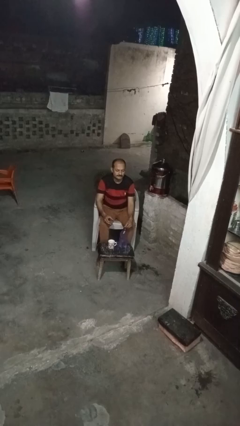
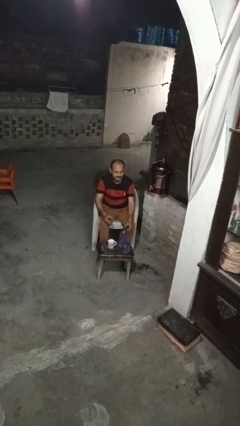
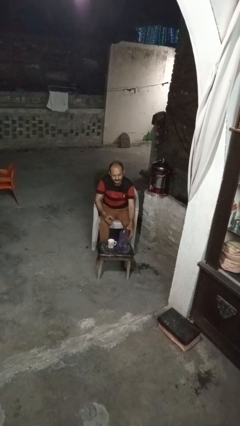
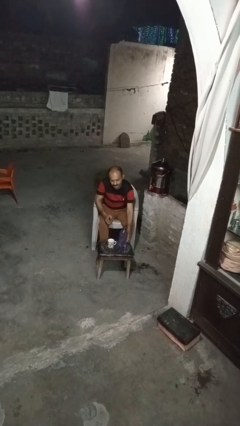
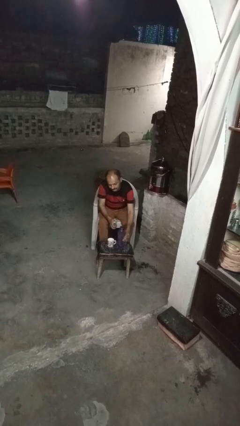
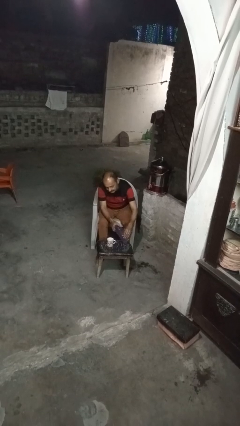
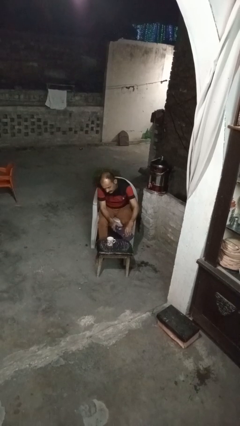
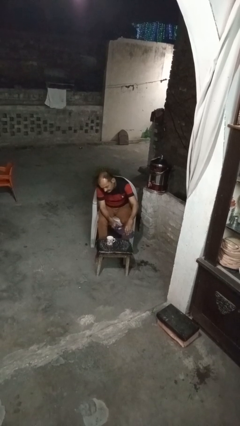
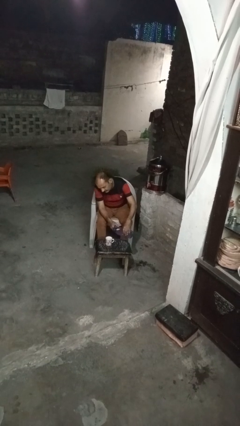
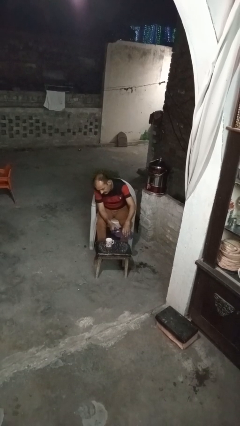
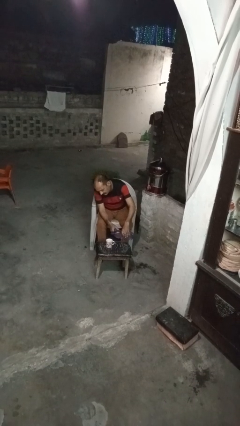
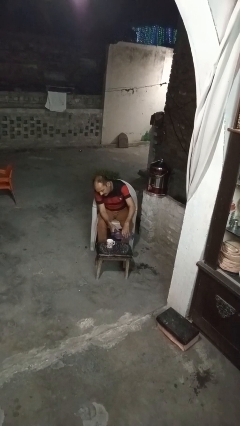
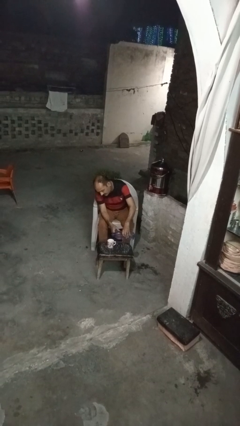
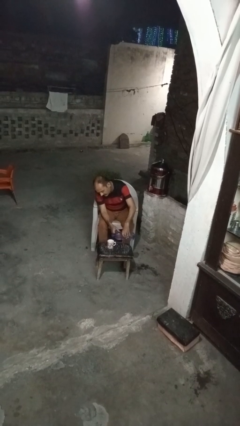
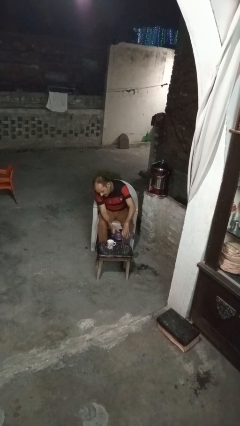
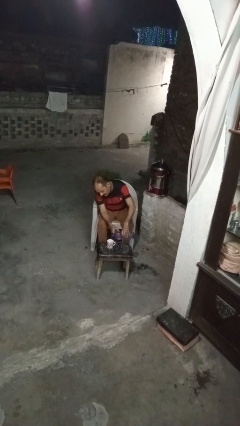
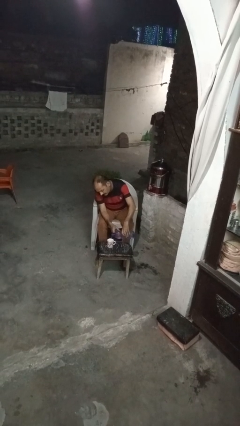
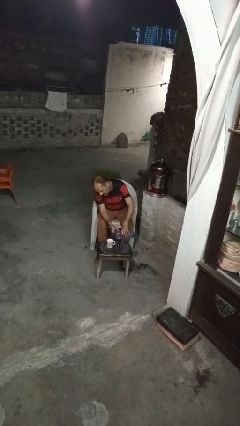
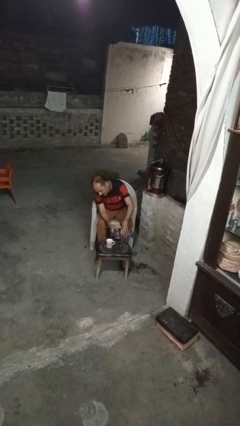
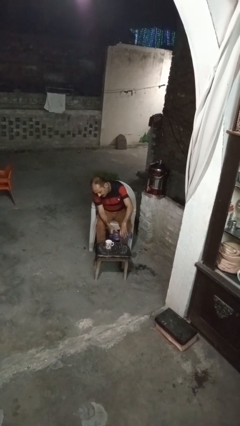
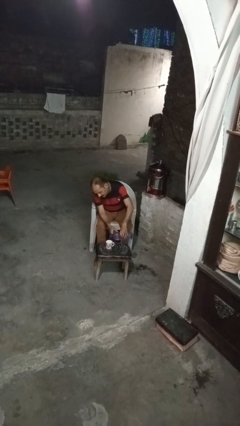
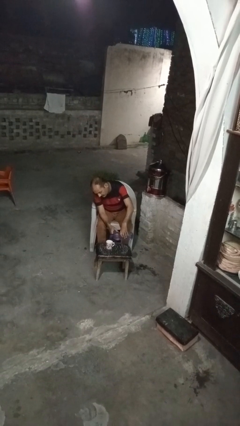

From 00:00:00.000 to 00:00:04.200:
person pours liquid into cup

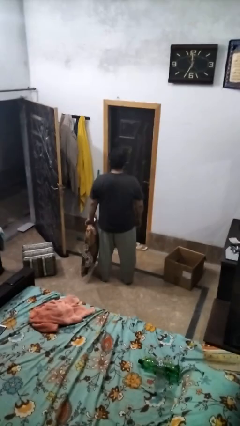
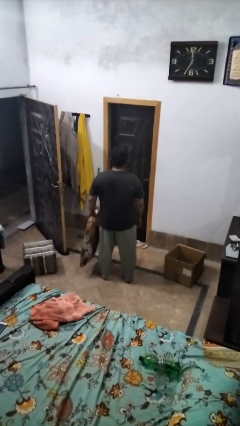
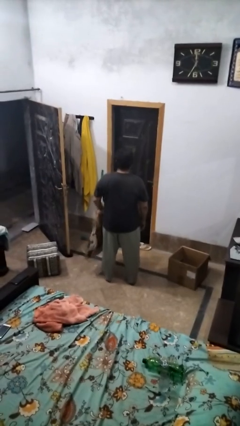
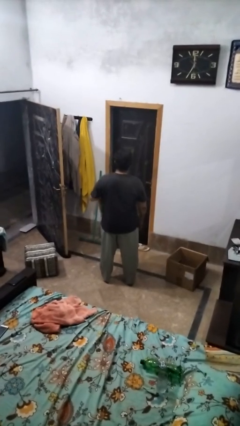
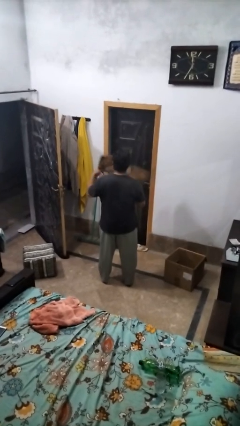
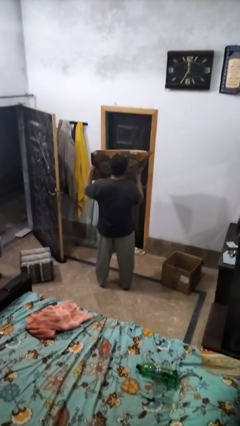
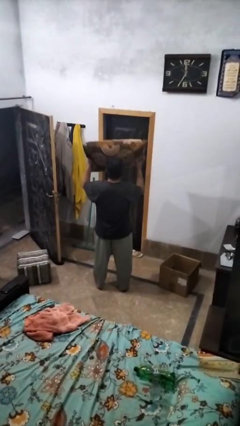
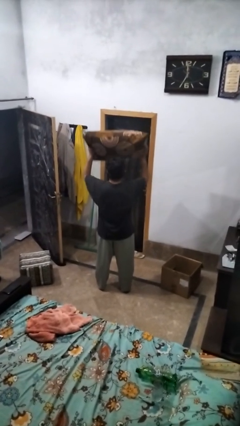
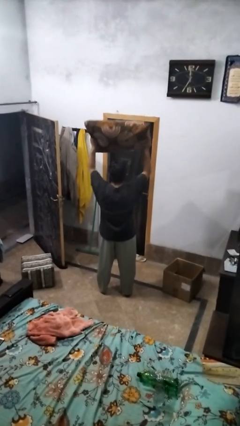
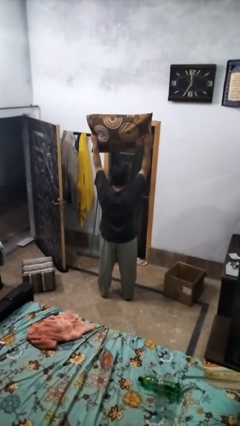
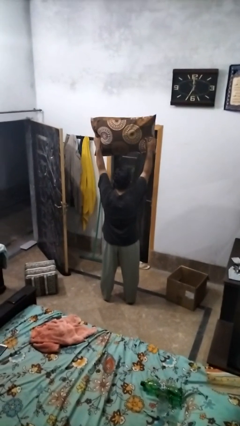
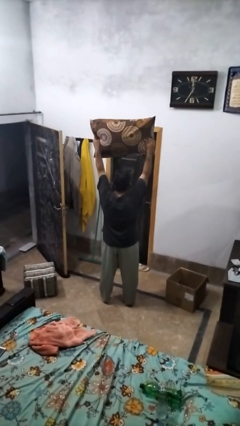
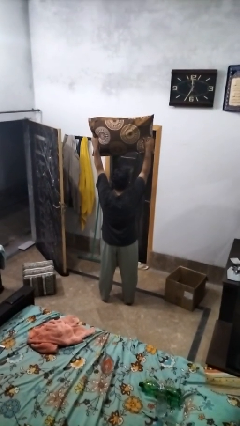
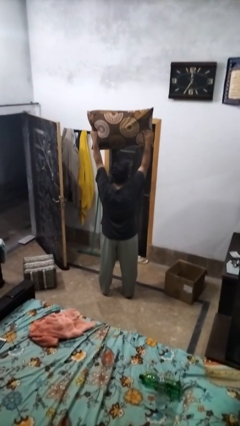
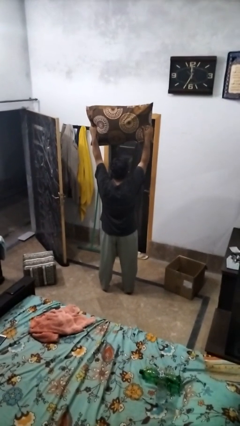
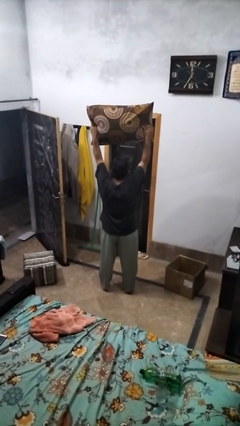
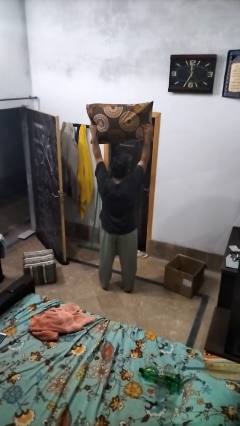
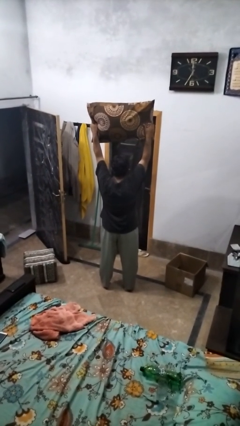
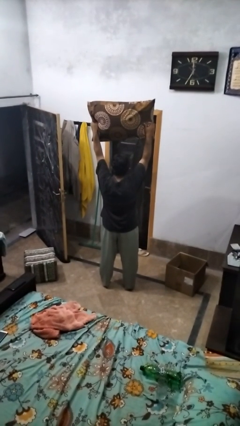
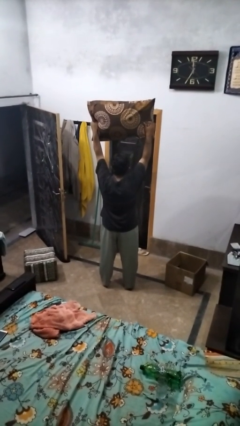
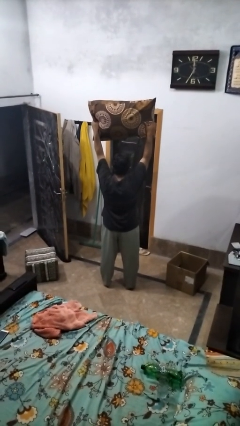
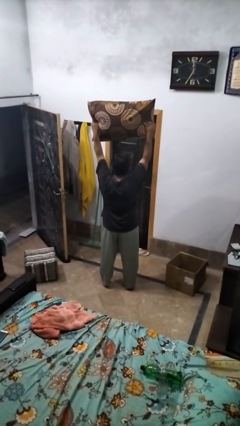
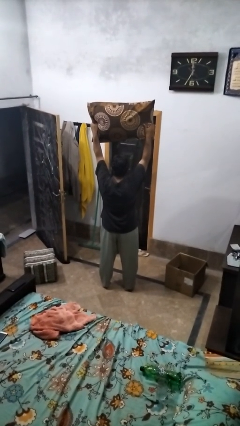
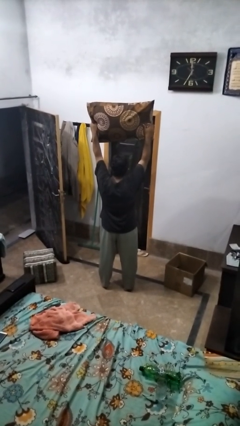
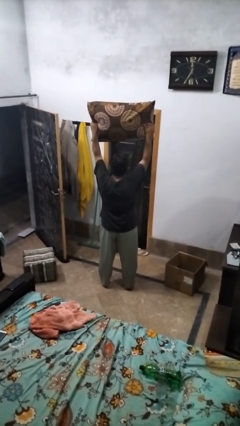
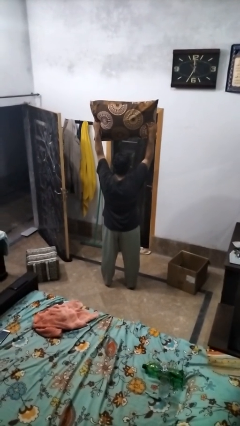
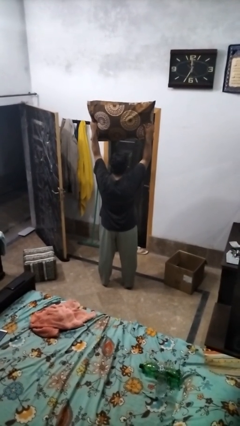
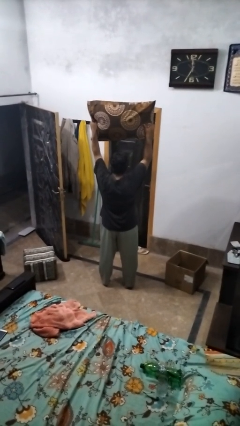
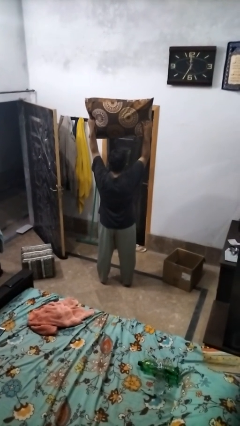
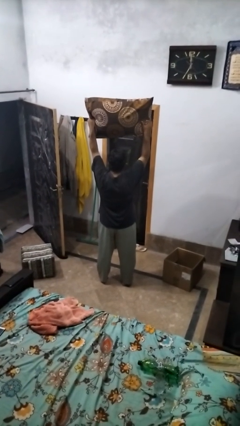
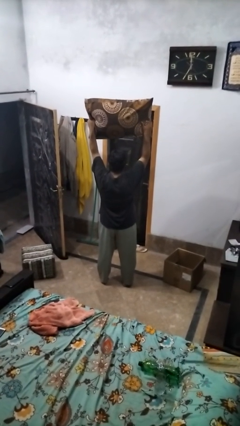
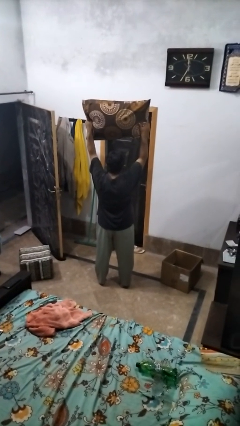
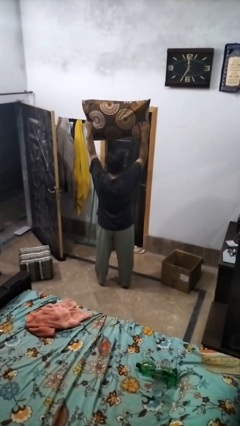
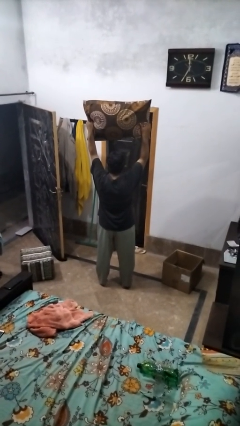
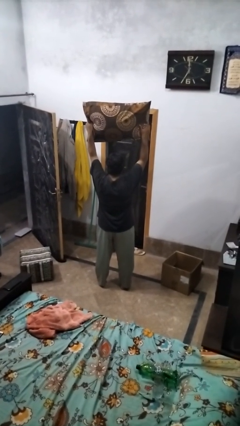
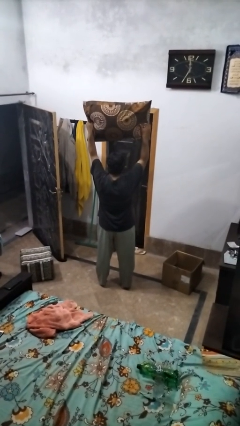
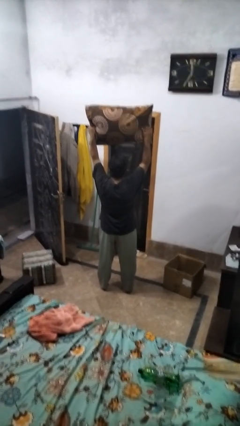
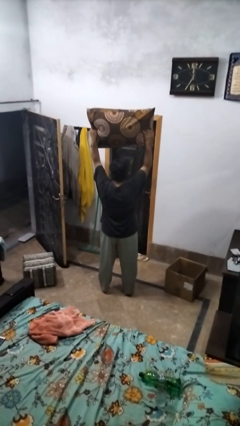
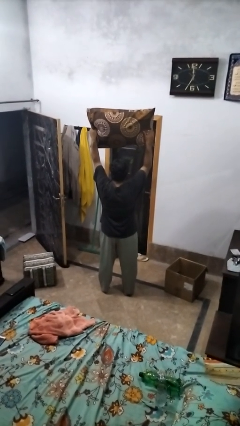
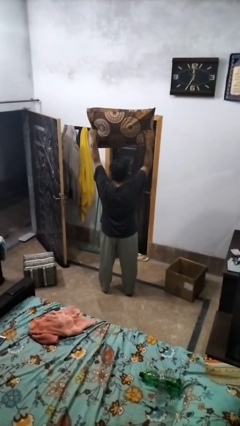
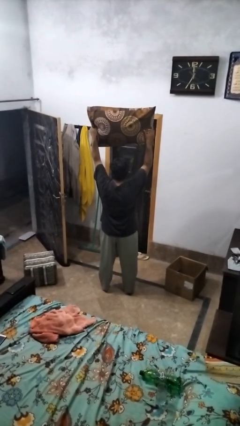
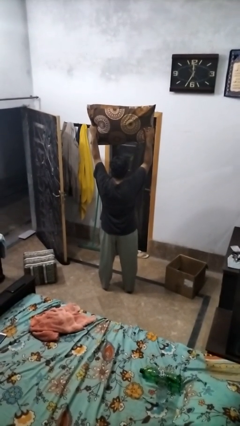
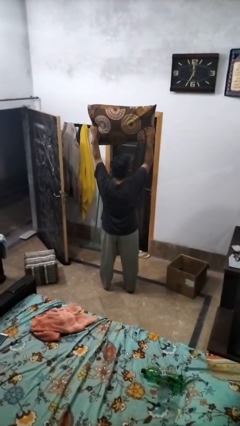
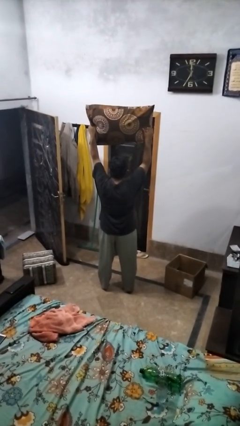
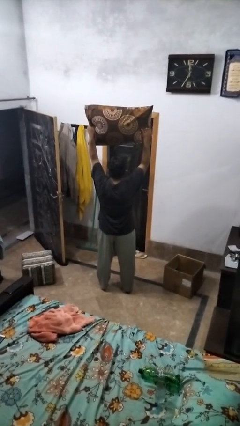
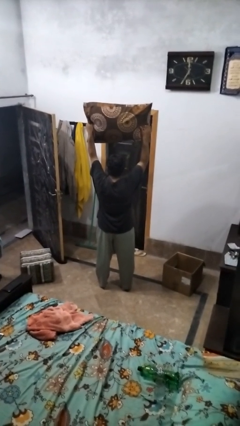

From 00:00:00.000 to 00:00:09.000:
person holds object above head

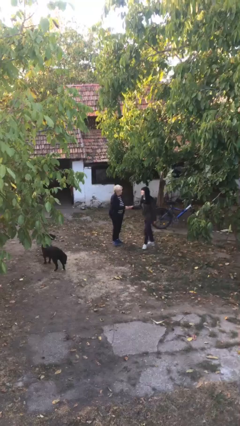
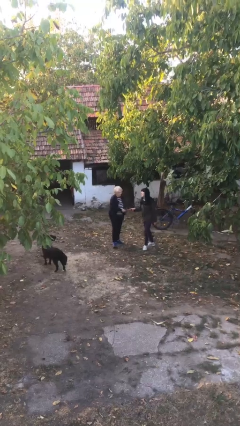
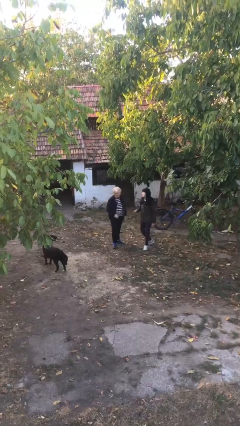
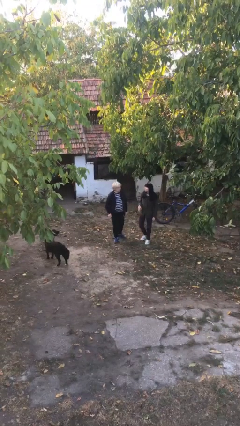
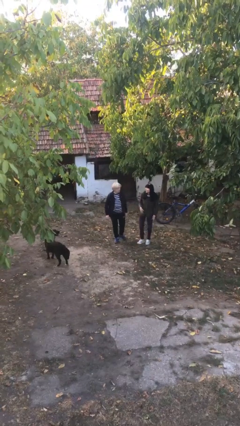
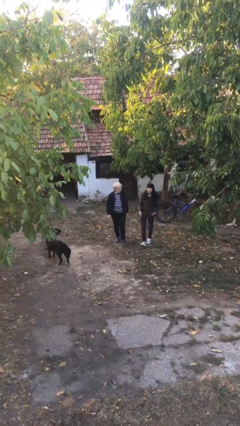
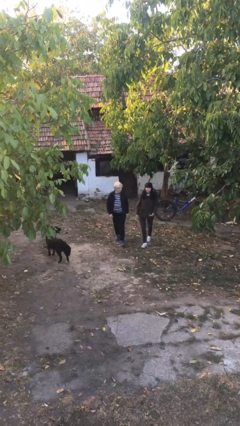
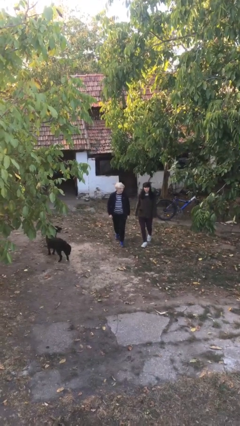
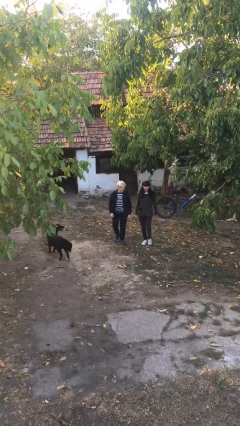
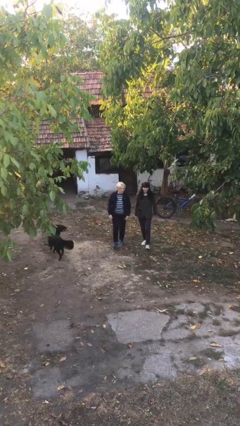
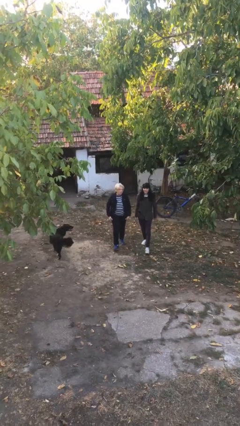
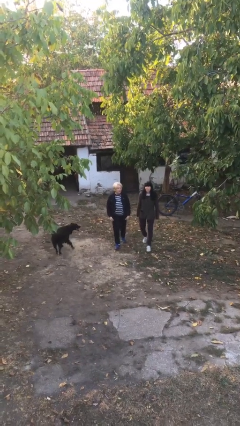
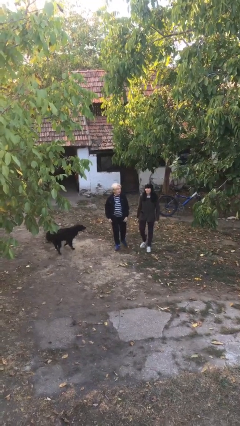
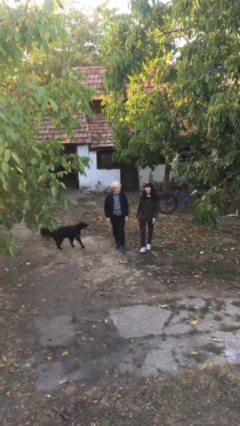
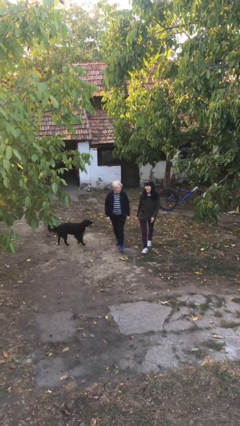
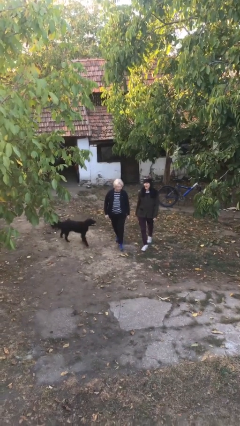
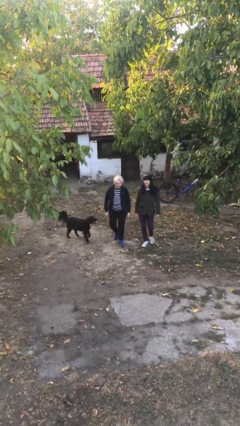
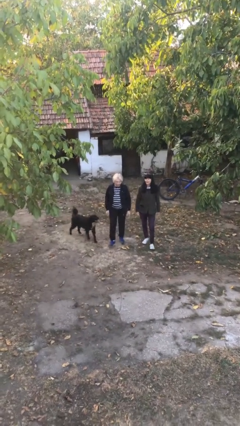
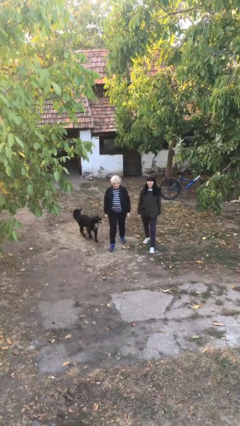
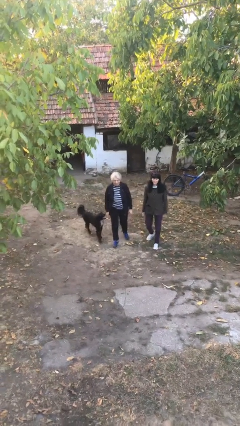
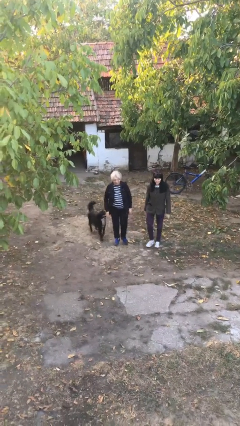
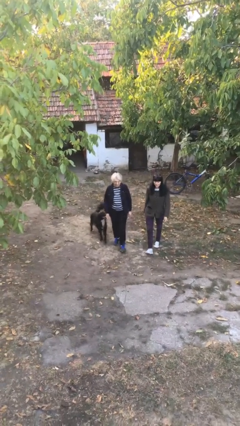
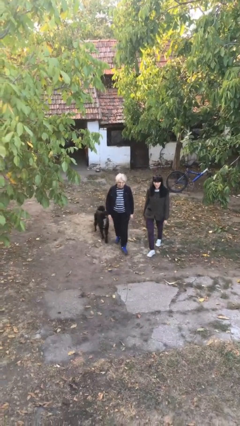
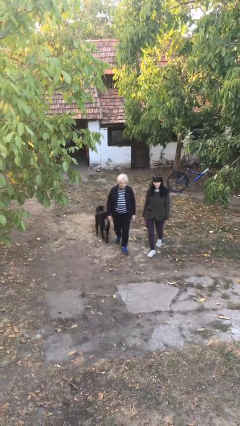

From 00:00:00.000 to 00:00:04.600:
person talks to person

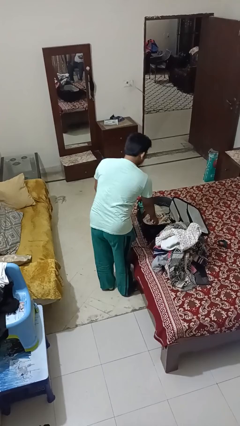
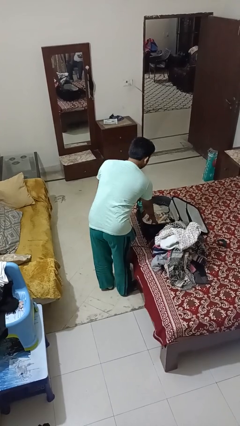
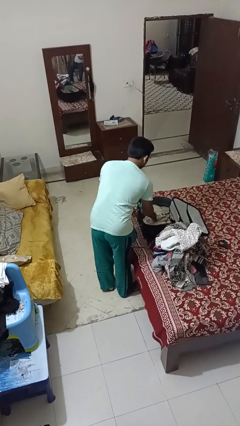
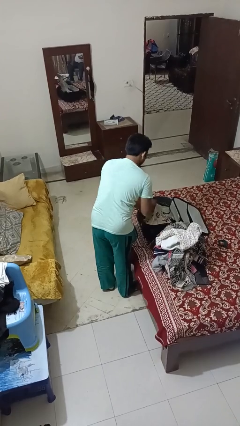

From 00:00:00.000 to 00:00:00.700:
person unloads clothes from suitcase
